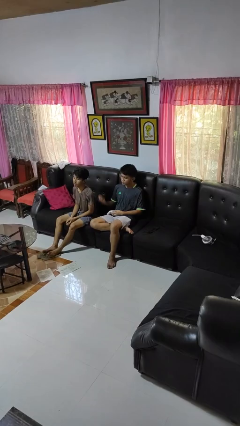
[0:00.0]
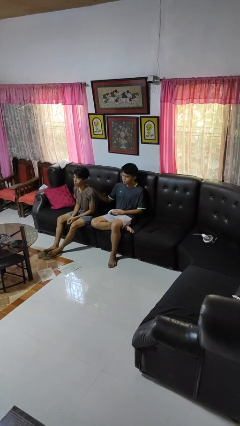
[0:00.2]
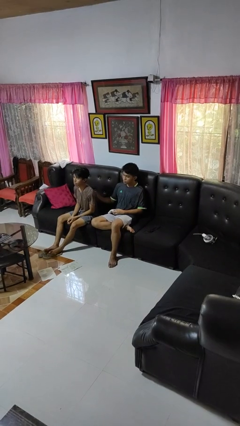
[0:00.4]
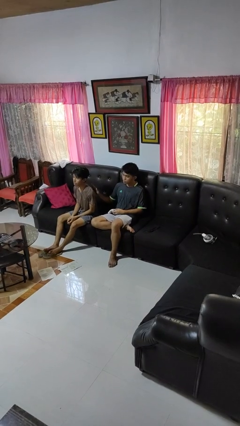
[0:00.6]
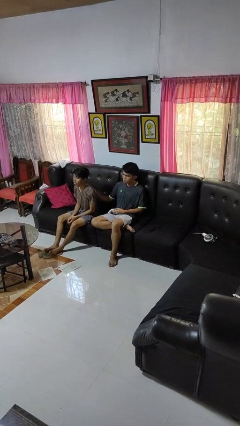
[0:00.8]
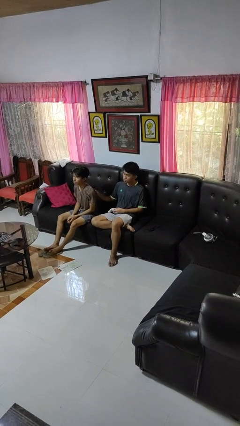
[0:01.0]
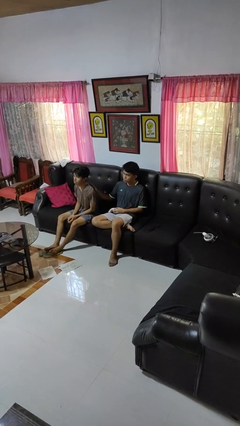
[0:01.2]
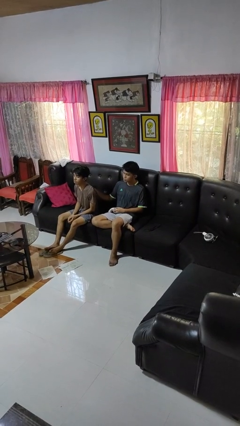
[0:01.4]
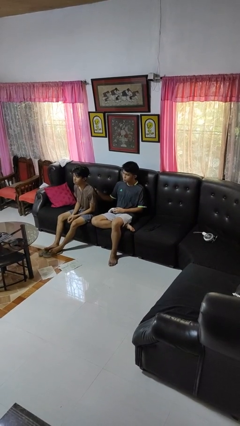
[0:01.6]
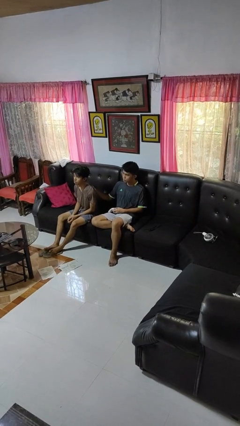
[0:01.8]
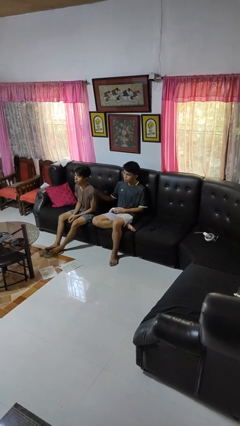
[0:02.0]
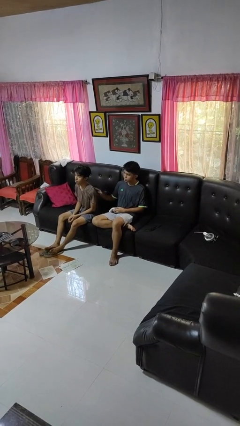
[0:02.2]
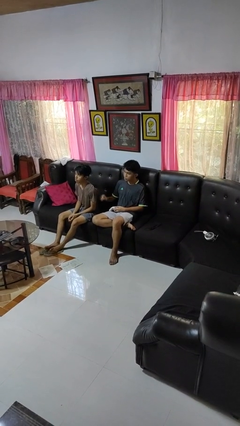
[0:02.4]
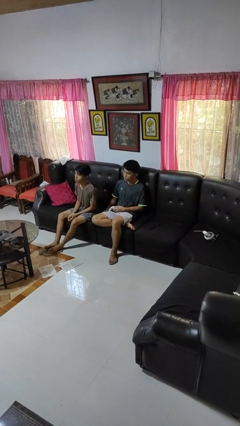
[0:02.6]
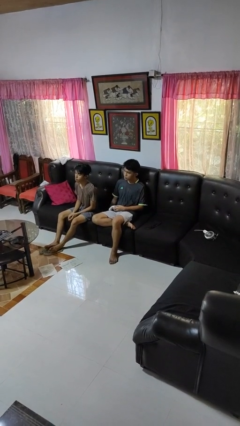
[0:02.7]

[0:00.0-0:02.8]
person touches back of person

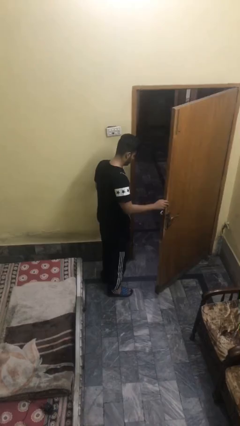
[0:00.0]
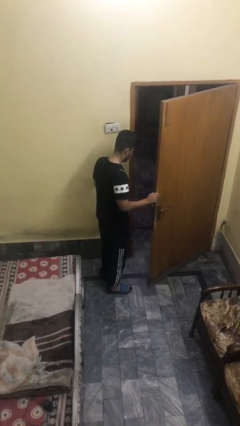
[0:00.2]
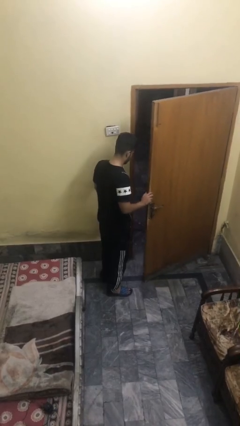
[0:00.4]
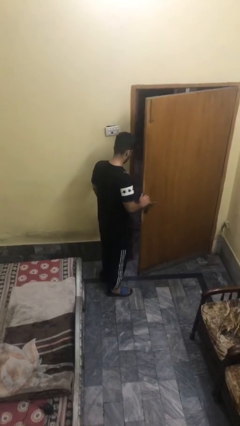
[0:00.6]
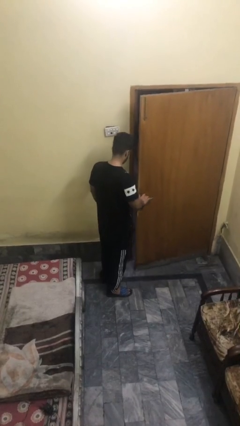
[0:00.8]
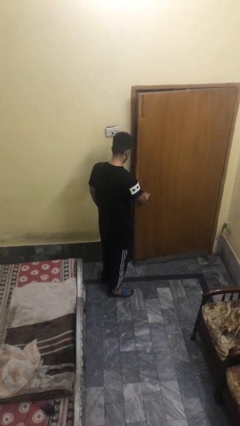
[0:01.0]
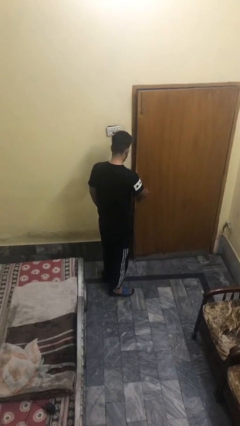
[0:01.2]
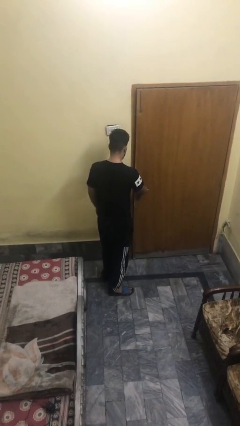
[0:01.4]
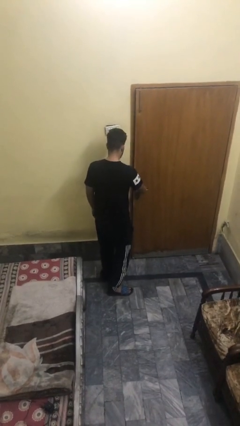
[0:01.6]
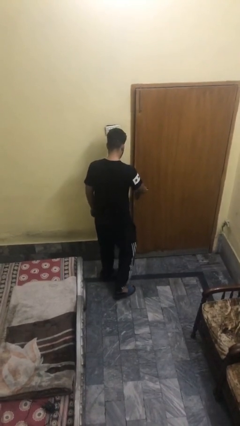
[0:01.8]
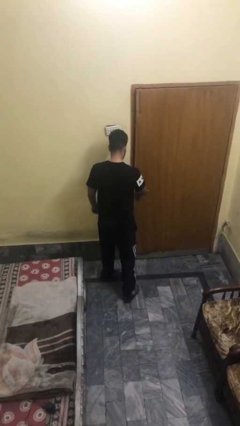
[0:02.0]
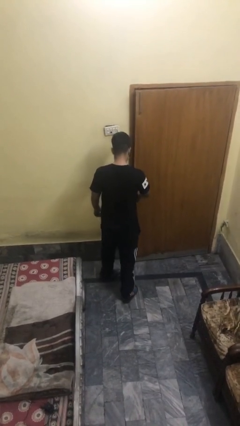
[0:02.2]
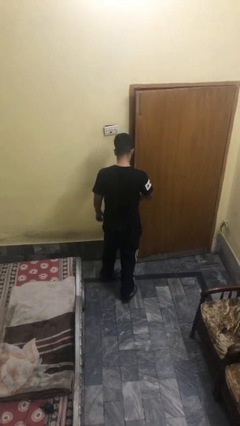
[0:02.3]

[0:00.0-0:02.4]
person closes facility door

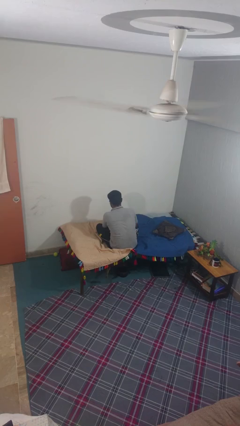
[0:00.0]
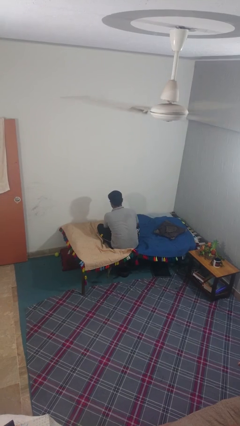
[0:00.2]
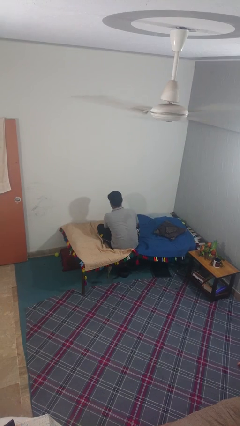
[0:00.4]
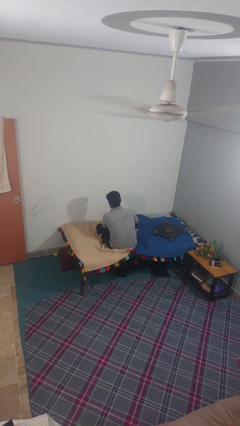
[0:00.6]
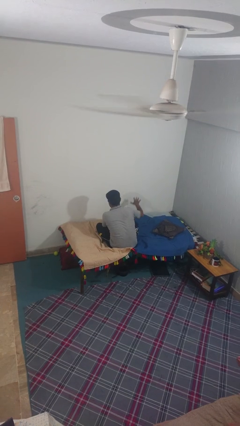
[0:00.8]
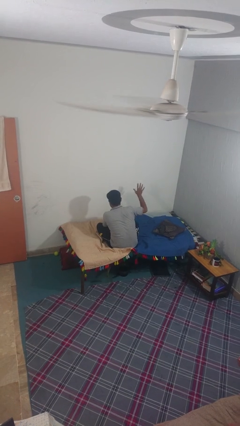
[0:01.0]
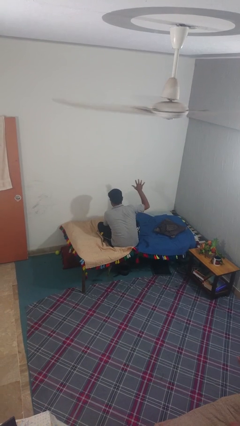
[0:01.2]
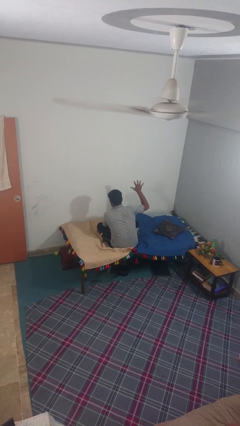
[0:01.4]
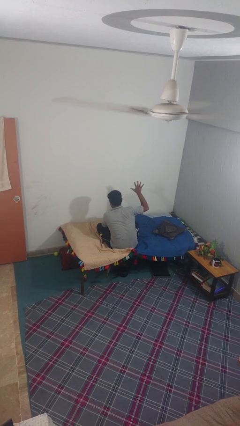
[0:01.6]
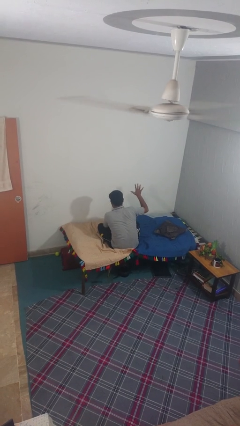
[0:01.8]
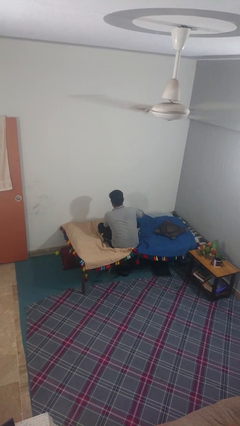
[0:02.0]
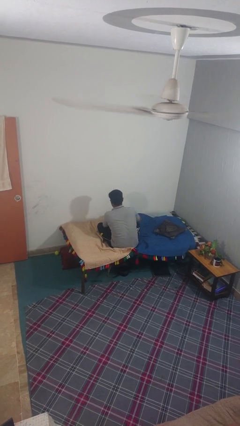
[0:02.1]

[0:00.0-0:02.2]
person gestures number five

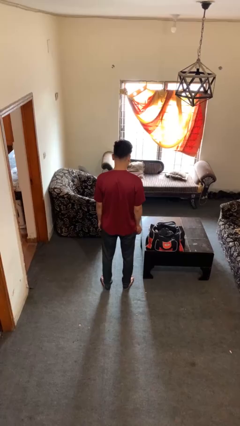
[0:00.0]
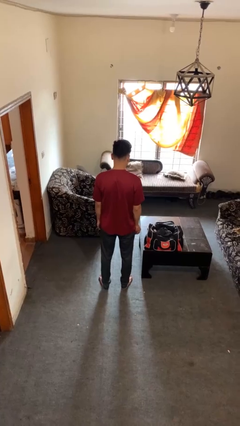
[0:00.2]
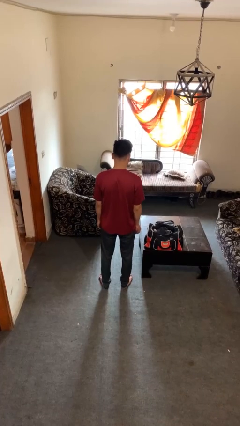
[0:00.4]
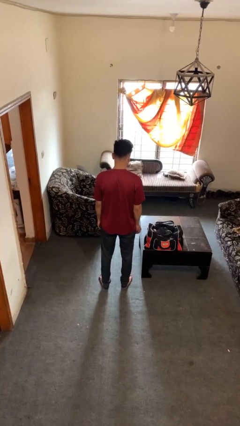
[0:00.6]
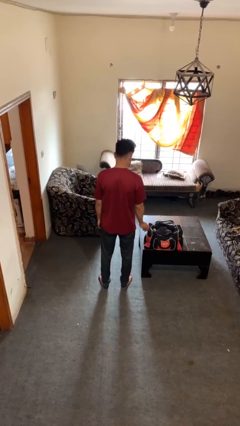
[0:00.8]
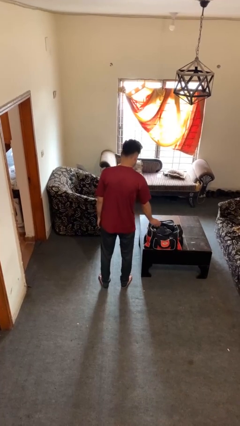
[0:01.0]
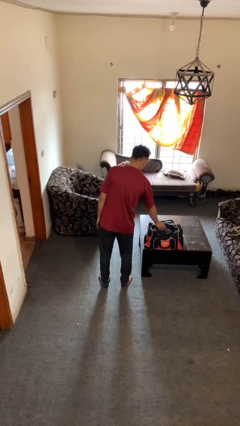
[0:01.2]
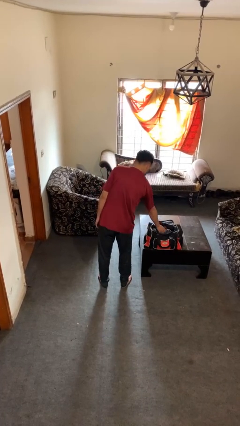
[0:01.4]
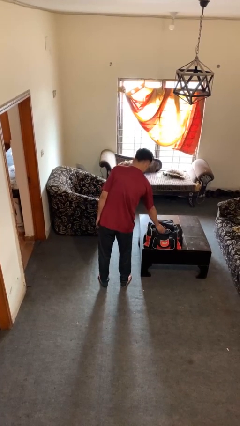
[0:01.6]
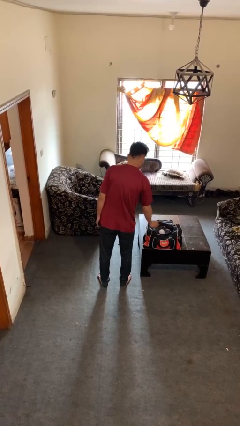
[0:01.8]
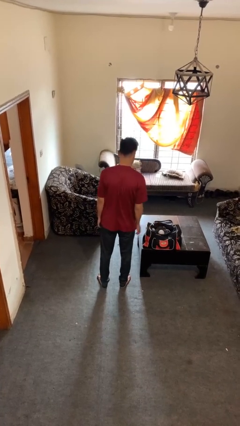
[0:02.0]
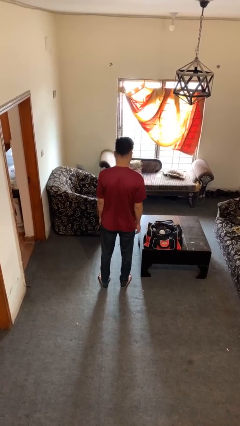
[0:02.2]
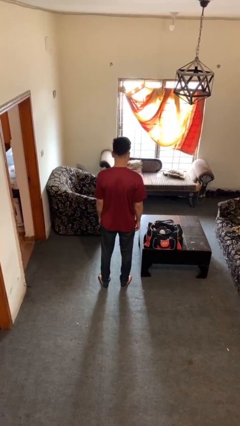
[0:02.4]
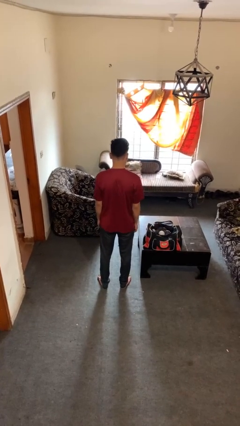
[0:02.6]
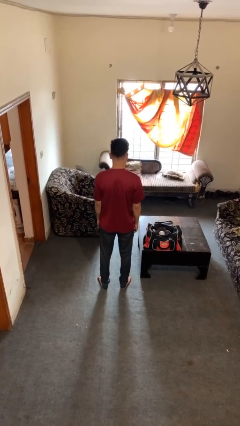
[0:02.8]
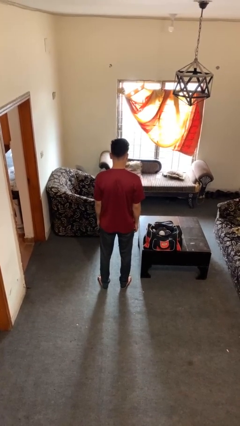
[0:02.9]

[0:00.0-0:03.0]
person puts object into bag

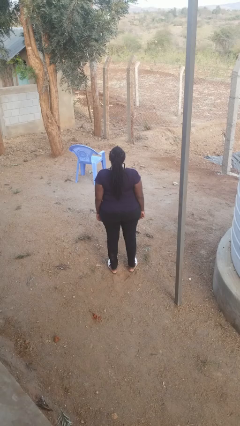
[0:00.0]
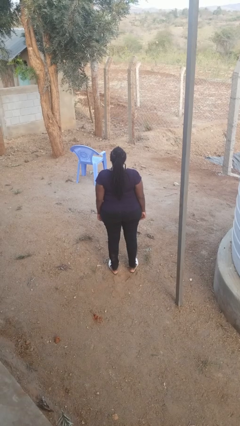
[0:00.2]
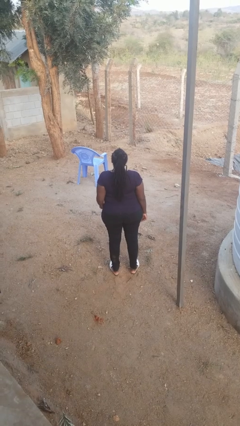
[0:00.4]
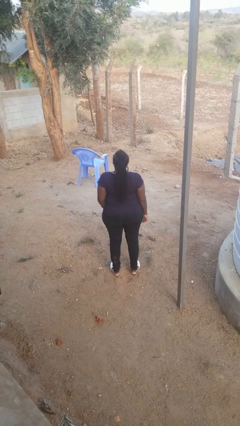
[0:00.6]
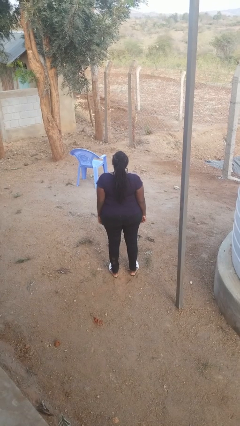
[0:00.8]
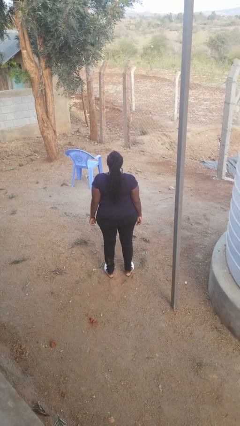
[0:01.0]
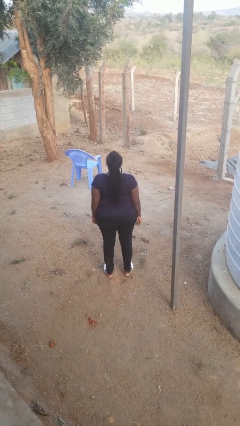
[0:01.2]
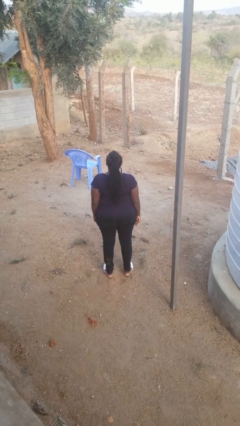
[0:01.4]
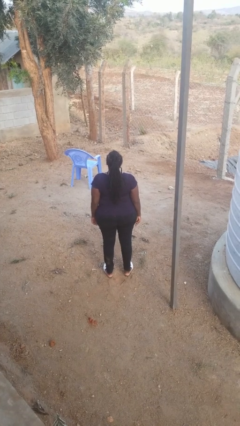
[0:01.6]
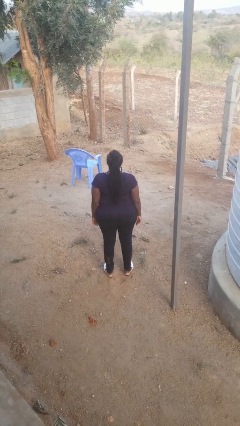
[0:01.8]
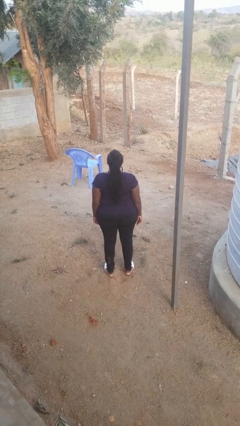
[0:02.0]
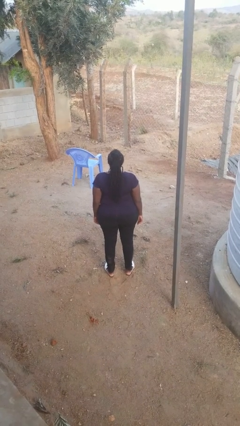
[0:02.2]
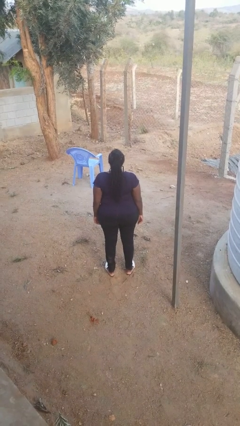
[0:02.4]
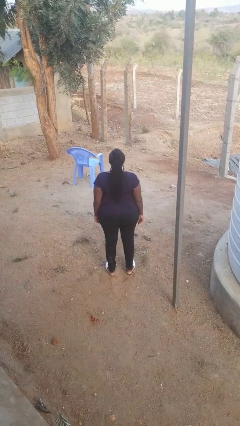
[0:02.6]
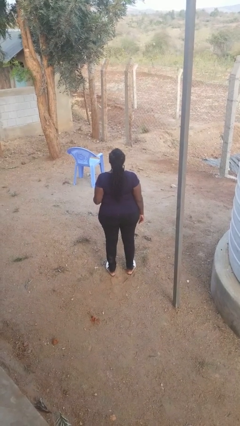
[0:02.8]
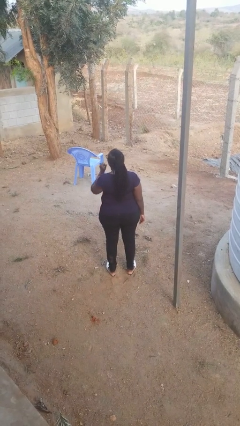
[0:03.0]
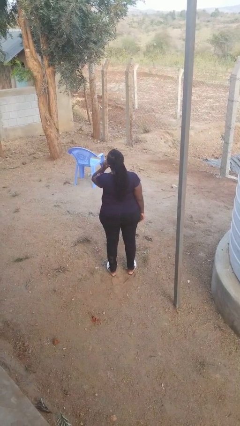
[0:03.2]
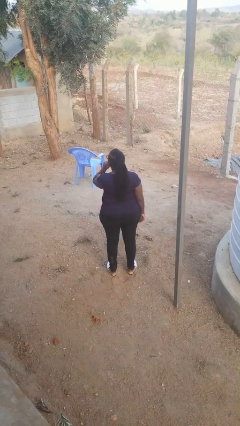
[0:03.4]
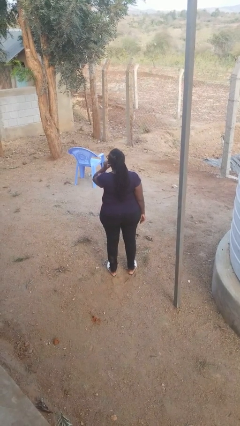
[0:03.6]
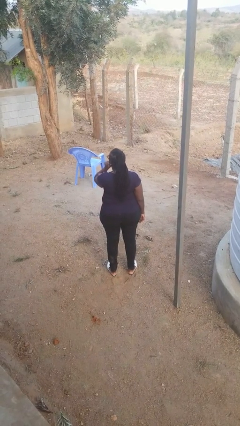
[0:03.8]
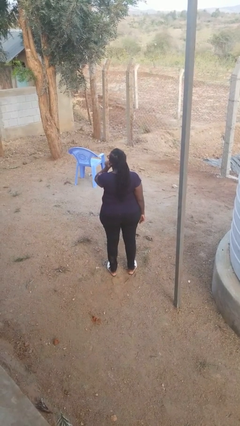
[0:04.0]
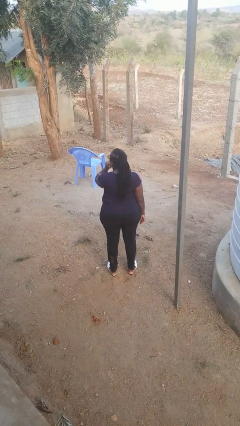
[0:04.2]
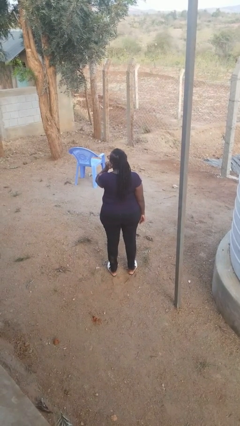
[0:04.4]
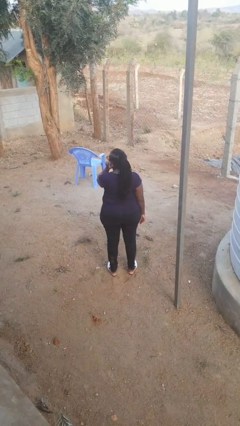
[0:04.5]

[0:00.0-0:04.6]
person touches earlobe

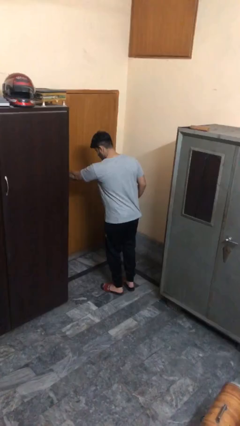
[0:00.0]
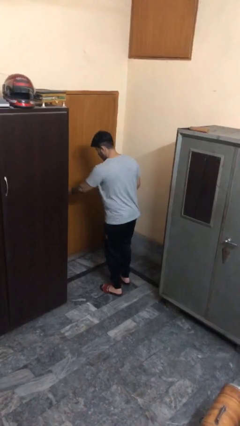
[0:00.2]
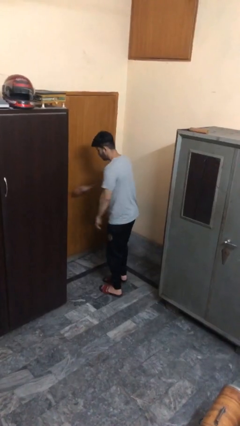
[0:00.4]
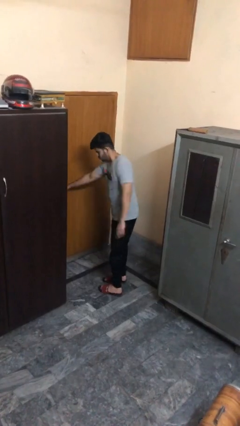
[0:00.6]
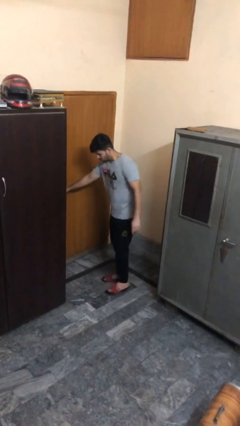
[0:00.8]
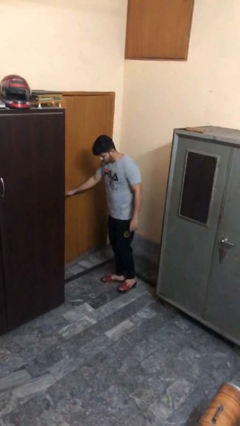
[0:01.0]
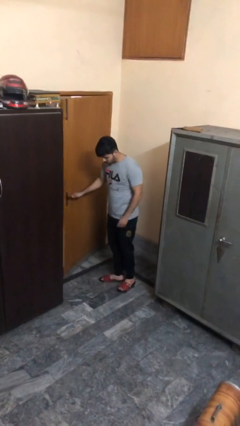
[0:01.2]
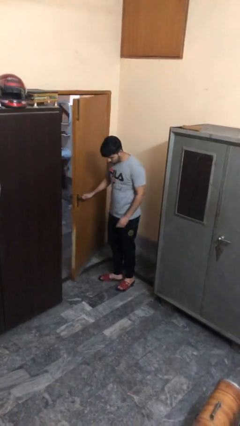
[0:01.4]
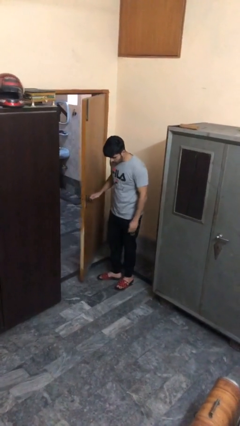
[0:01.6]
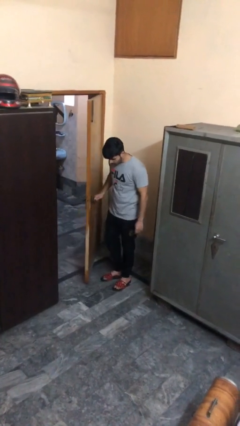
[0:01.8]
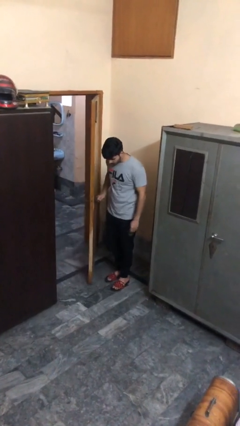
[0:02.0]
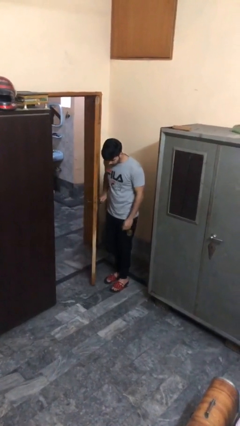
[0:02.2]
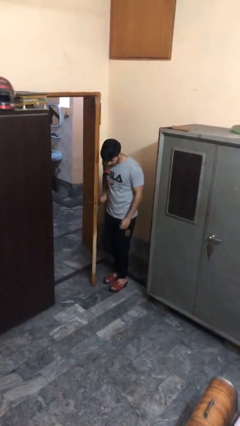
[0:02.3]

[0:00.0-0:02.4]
person opens facility door
